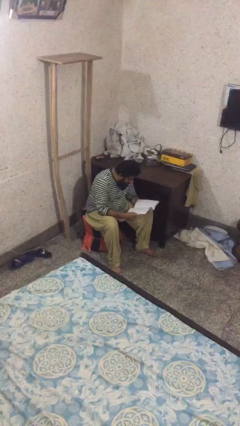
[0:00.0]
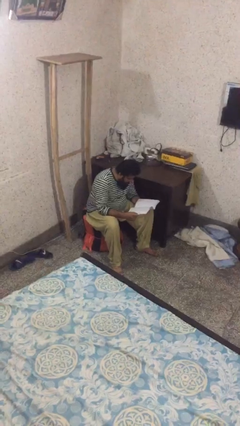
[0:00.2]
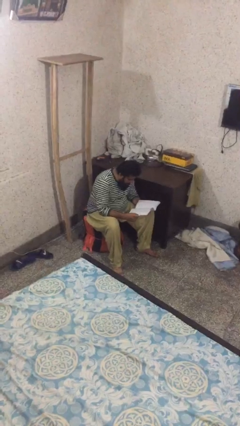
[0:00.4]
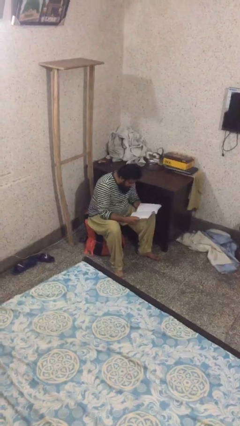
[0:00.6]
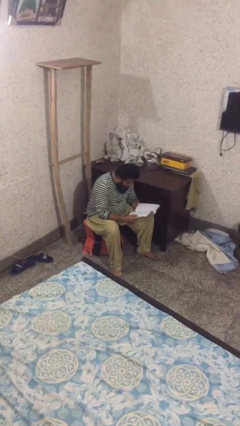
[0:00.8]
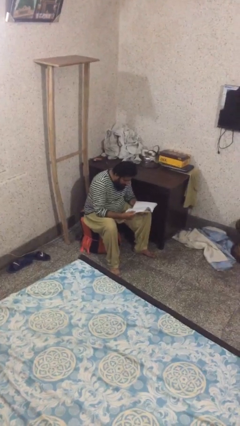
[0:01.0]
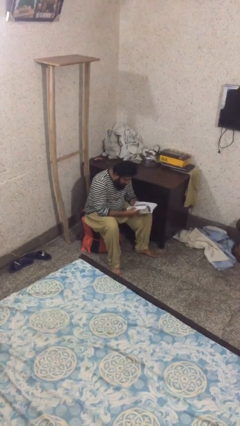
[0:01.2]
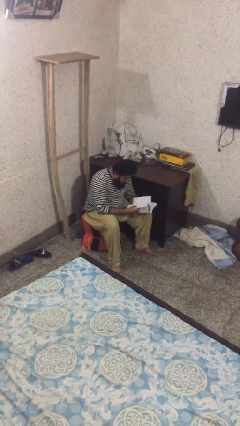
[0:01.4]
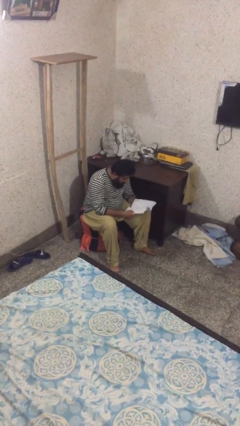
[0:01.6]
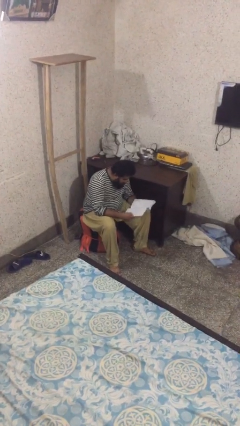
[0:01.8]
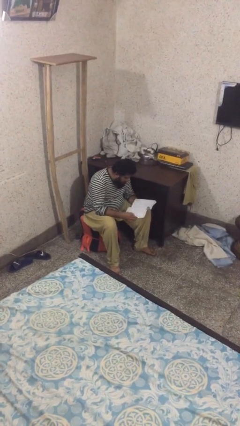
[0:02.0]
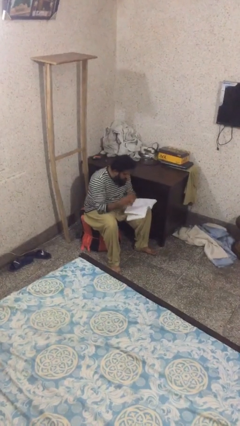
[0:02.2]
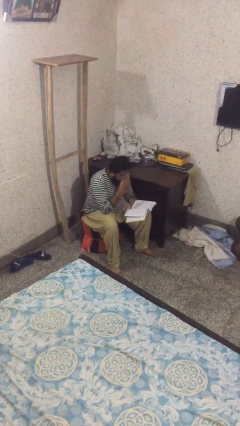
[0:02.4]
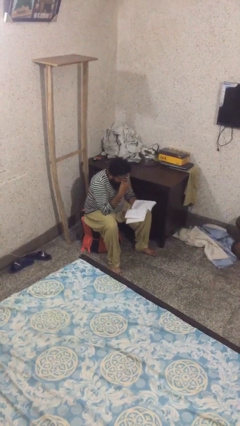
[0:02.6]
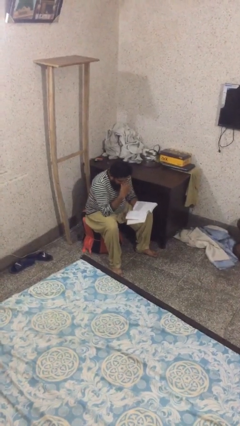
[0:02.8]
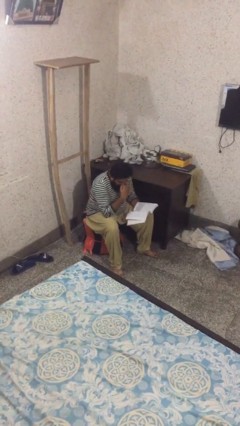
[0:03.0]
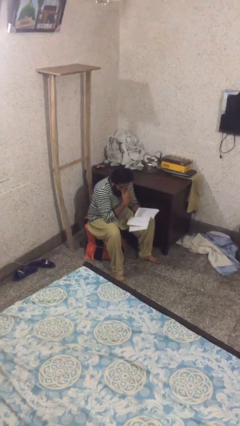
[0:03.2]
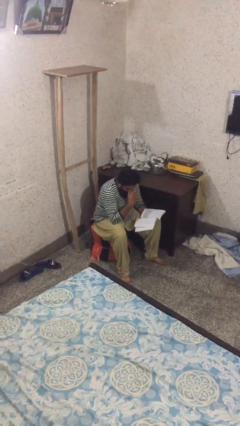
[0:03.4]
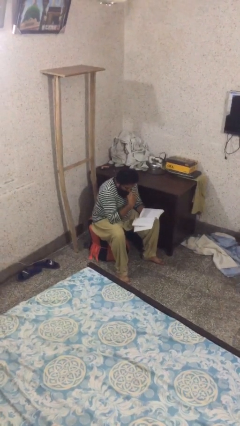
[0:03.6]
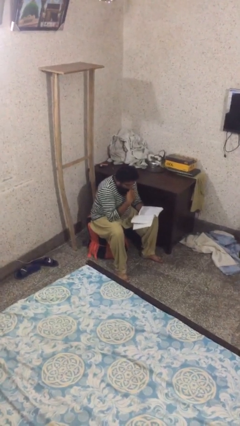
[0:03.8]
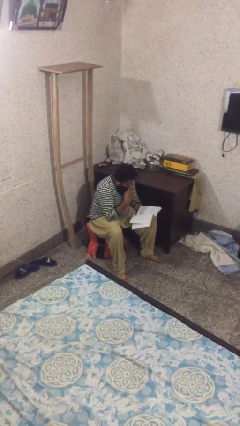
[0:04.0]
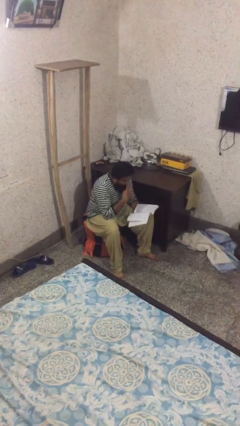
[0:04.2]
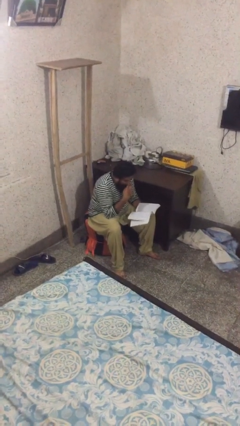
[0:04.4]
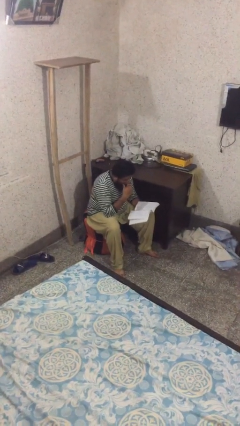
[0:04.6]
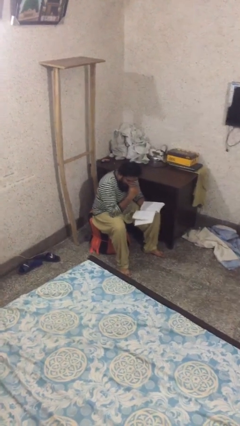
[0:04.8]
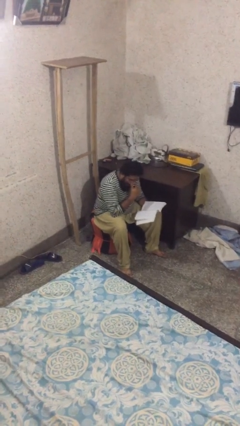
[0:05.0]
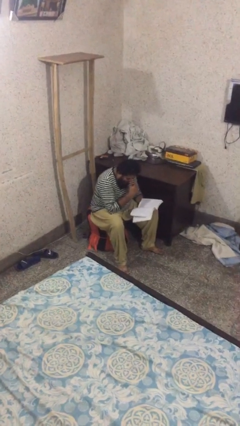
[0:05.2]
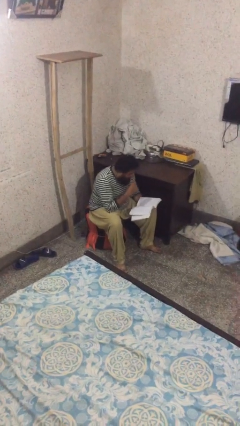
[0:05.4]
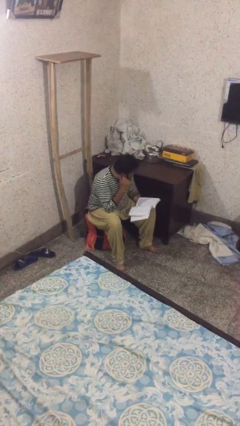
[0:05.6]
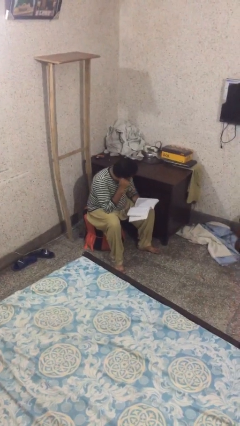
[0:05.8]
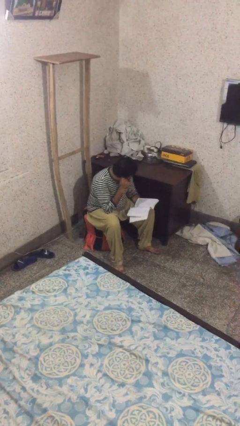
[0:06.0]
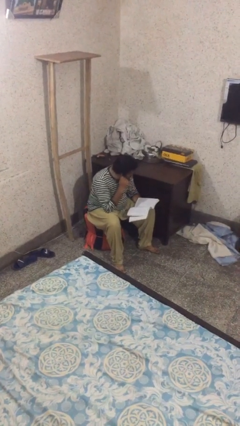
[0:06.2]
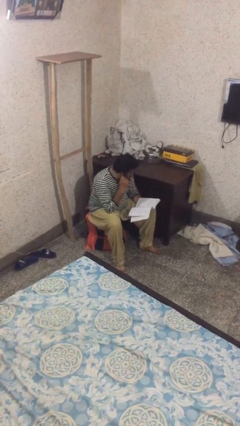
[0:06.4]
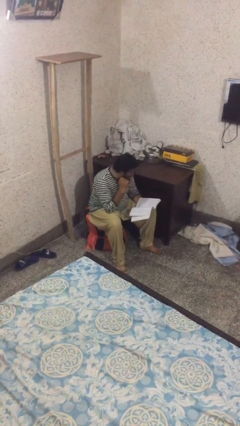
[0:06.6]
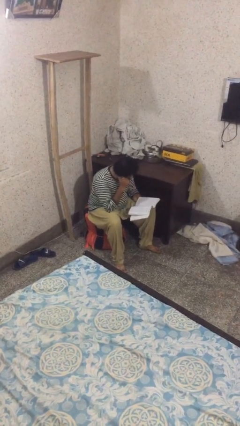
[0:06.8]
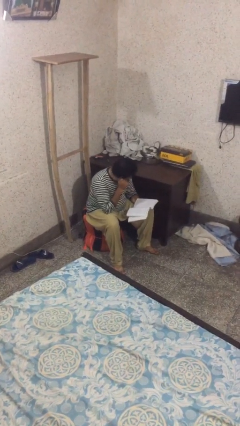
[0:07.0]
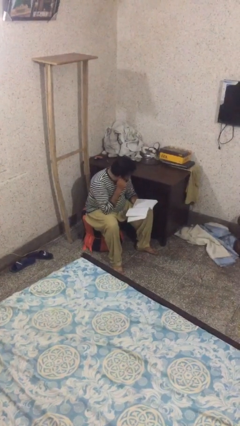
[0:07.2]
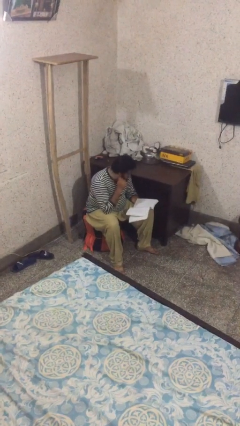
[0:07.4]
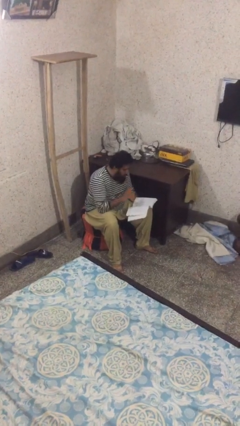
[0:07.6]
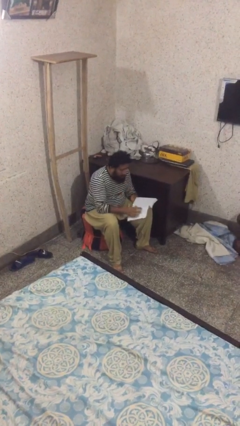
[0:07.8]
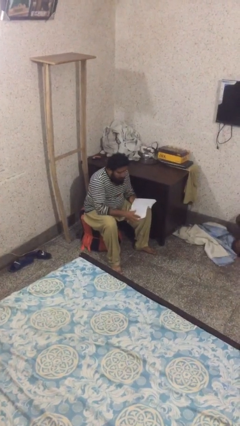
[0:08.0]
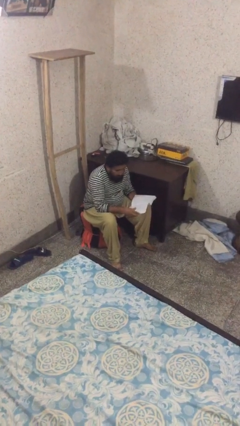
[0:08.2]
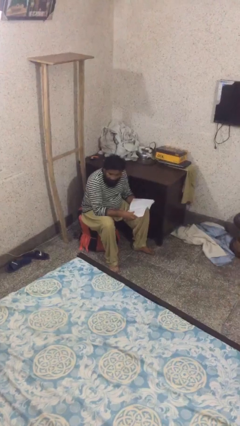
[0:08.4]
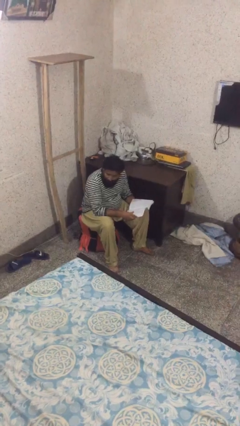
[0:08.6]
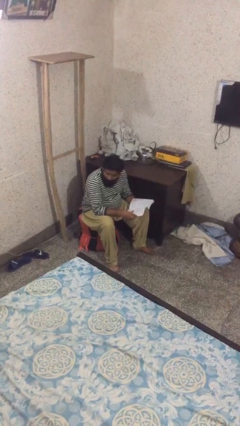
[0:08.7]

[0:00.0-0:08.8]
person reads document

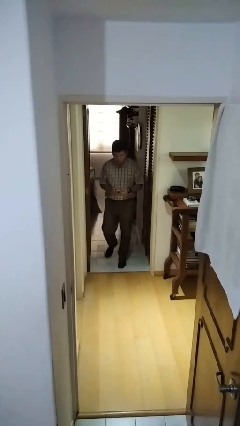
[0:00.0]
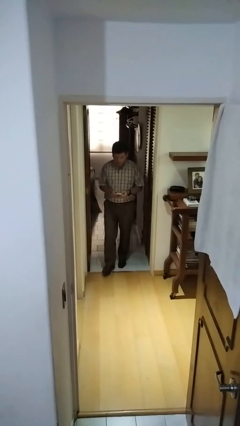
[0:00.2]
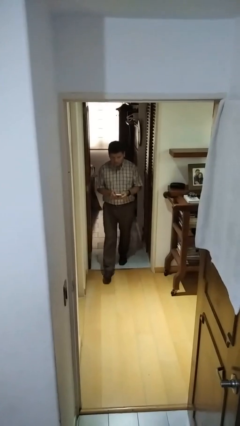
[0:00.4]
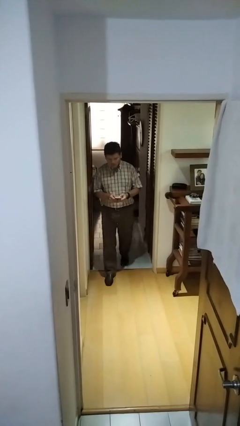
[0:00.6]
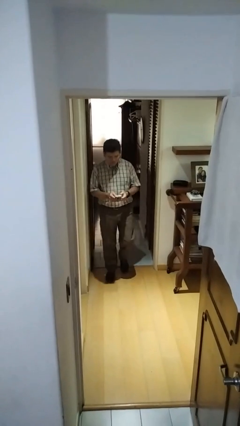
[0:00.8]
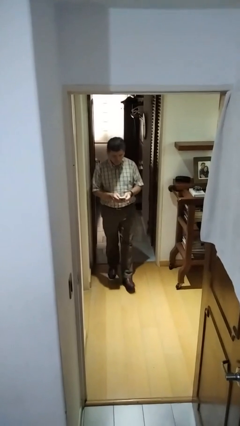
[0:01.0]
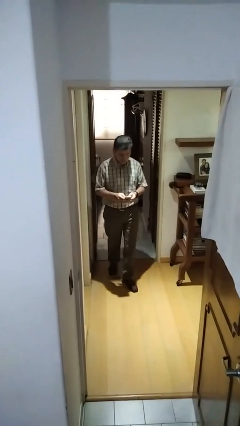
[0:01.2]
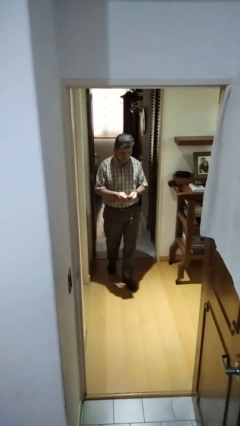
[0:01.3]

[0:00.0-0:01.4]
person enters scene through structure

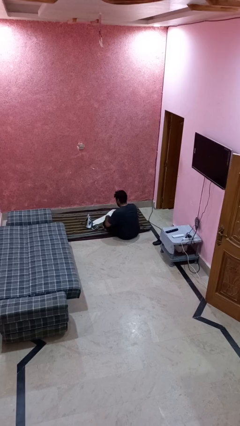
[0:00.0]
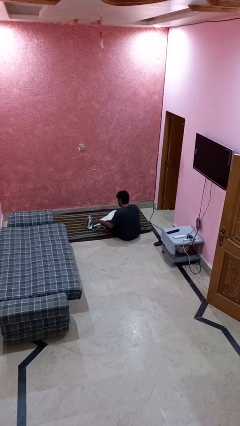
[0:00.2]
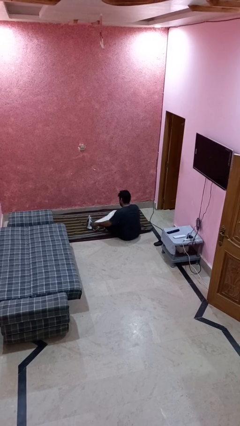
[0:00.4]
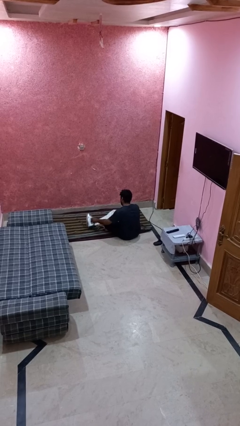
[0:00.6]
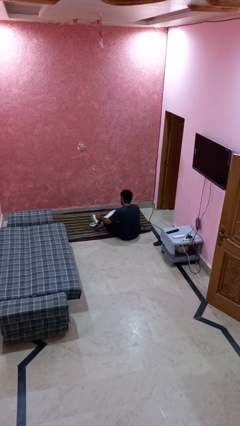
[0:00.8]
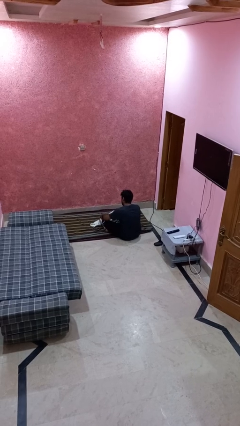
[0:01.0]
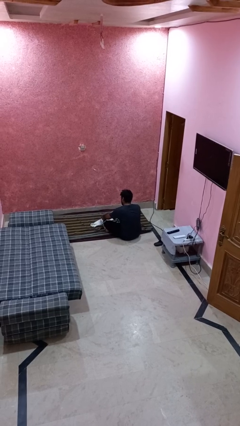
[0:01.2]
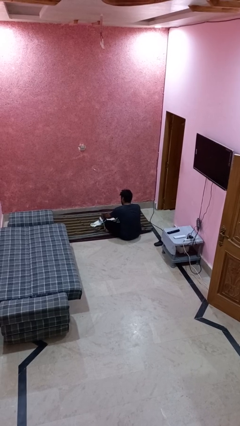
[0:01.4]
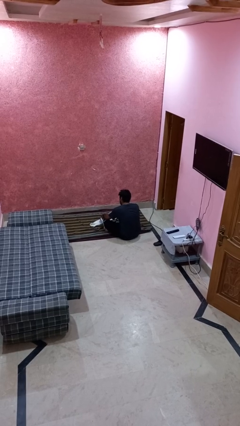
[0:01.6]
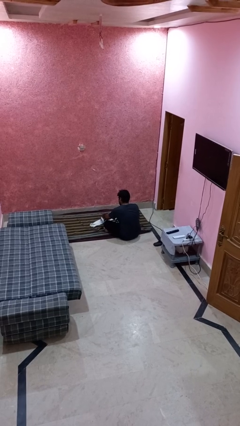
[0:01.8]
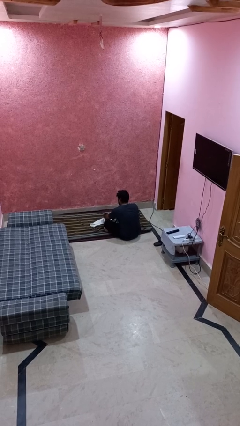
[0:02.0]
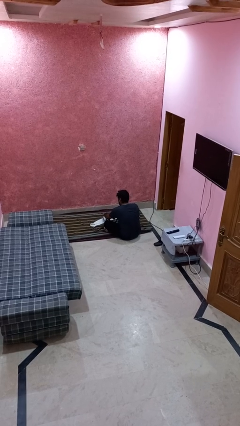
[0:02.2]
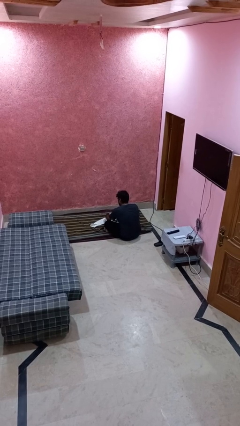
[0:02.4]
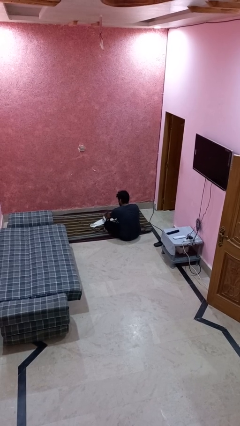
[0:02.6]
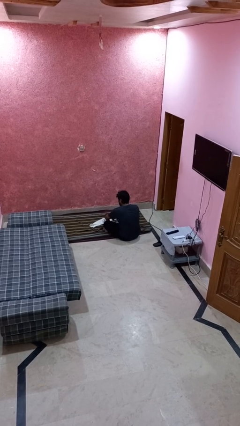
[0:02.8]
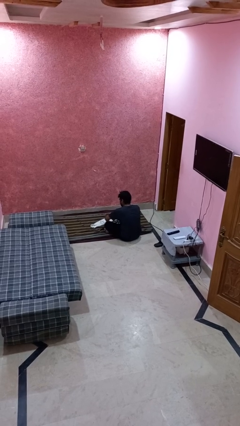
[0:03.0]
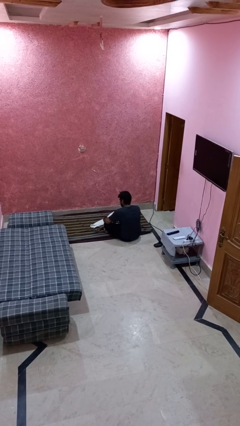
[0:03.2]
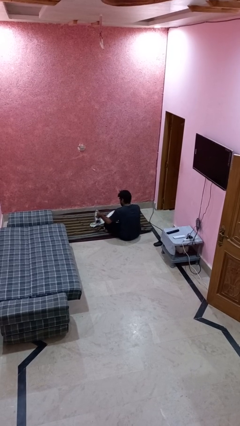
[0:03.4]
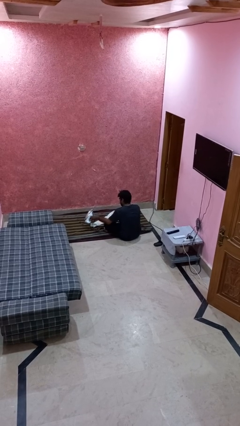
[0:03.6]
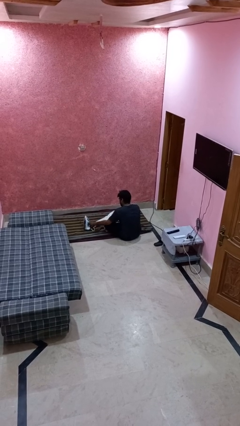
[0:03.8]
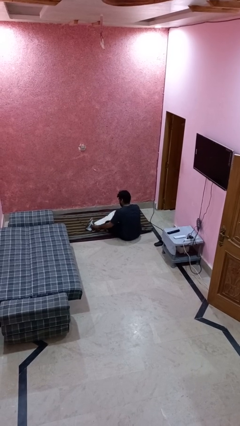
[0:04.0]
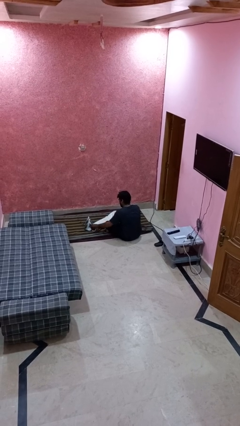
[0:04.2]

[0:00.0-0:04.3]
person irons clothes

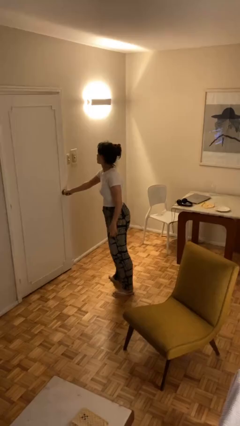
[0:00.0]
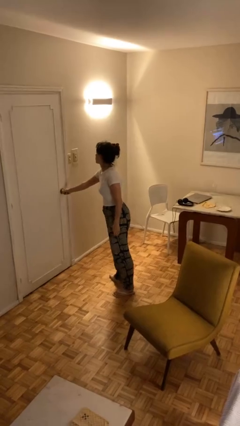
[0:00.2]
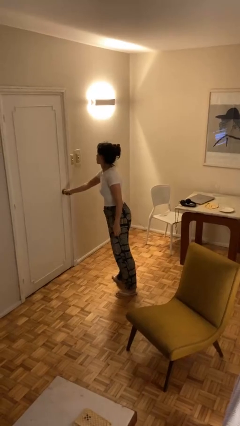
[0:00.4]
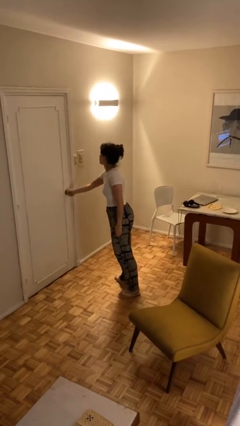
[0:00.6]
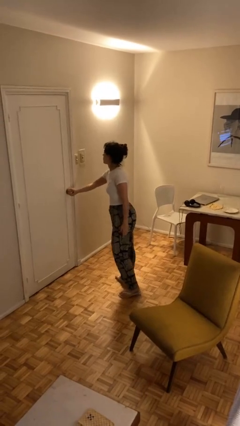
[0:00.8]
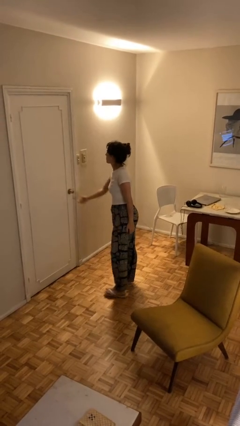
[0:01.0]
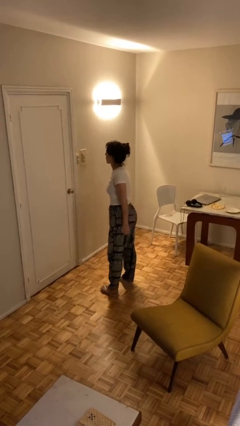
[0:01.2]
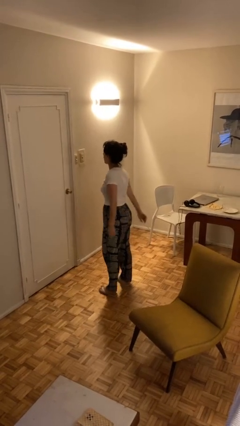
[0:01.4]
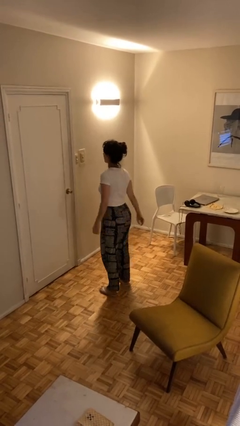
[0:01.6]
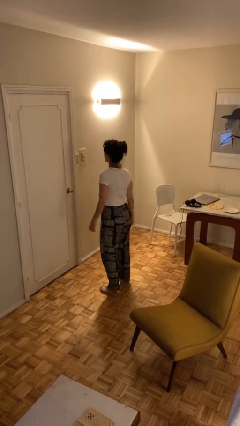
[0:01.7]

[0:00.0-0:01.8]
person closes facility door

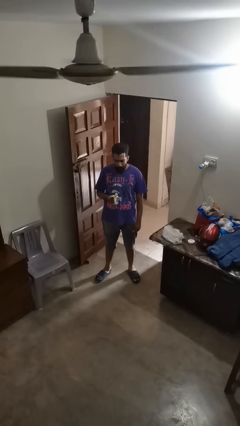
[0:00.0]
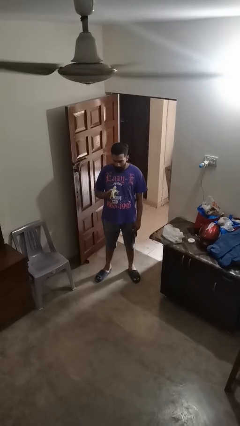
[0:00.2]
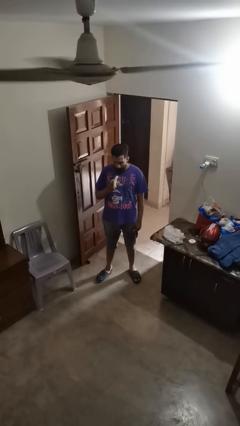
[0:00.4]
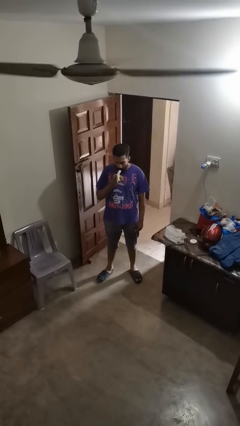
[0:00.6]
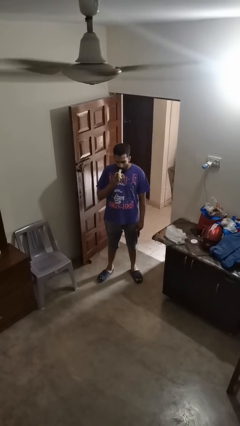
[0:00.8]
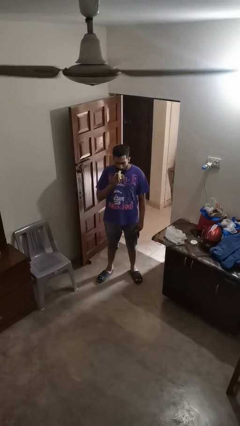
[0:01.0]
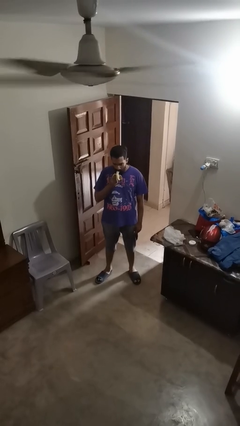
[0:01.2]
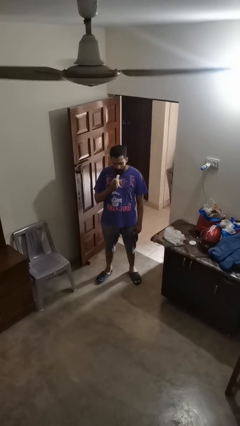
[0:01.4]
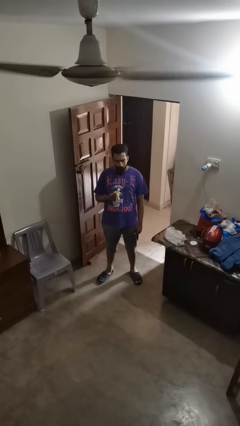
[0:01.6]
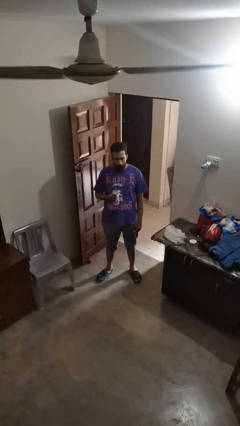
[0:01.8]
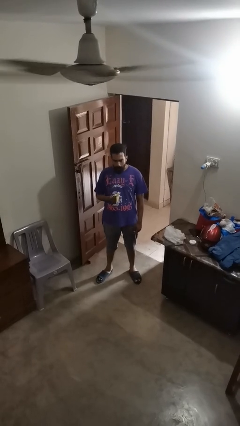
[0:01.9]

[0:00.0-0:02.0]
person eats banana
